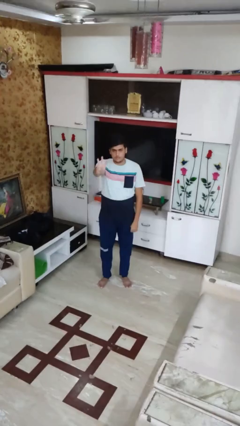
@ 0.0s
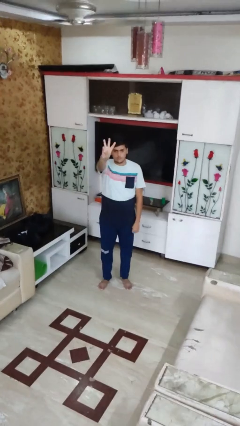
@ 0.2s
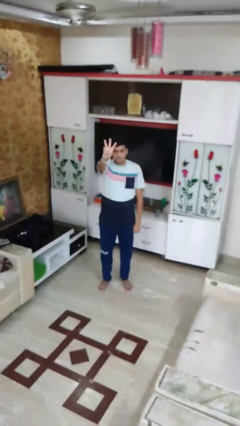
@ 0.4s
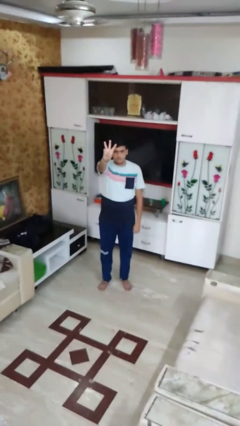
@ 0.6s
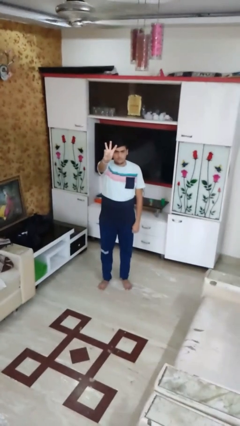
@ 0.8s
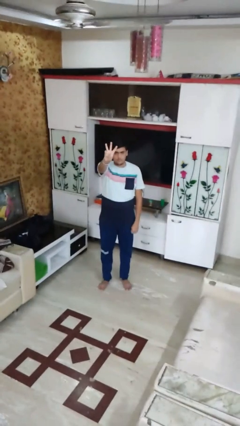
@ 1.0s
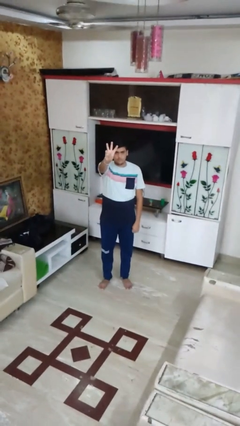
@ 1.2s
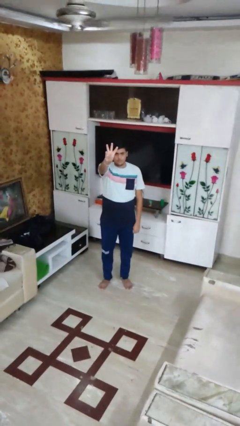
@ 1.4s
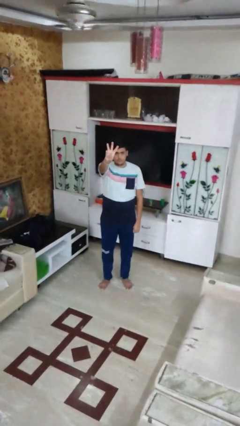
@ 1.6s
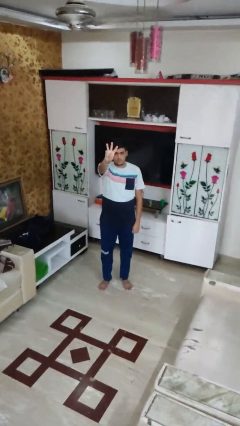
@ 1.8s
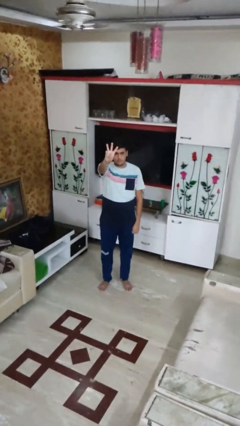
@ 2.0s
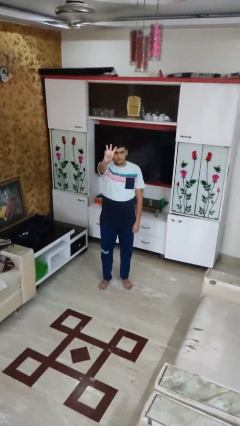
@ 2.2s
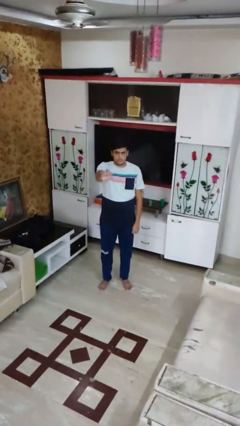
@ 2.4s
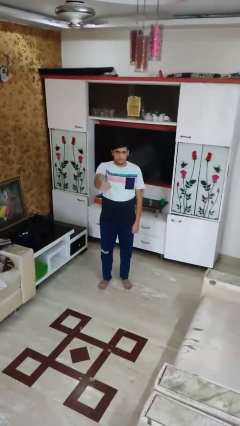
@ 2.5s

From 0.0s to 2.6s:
person gestures number three

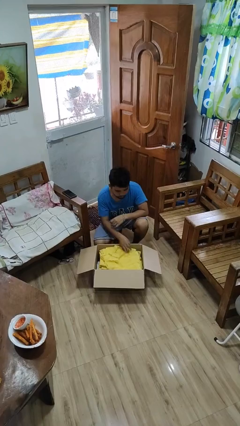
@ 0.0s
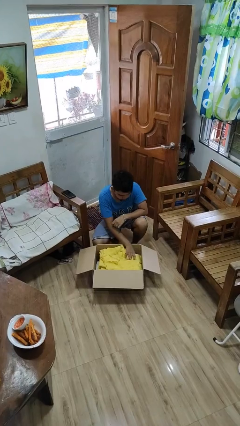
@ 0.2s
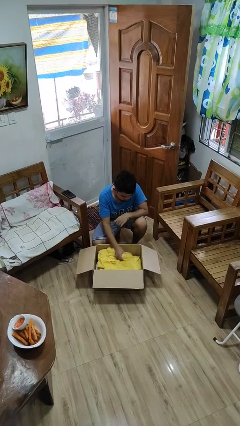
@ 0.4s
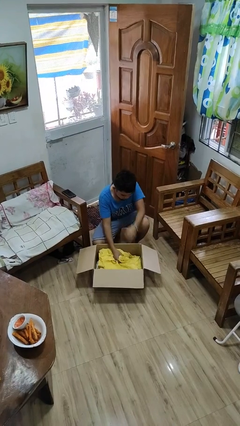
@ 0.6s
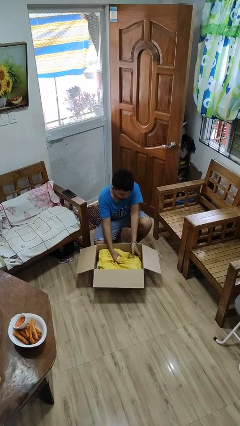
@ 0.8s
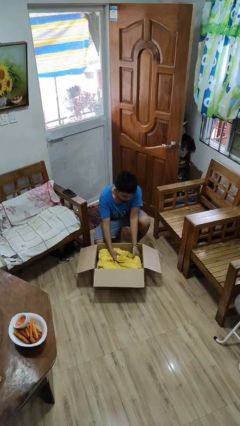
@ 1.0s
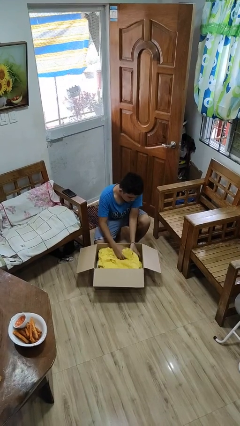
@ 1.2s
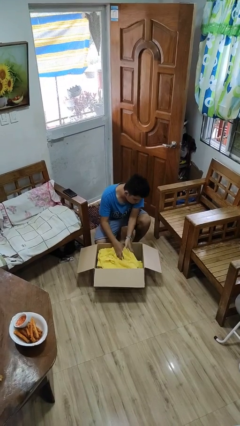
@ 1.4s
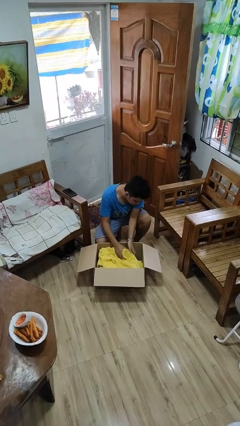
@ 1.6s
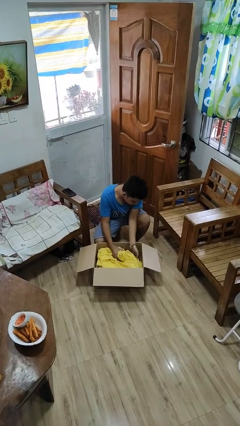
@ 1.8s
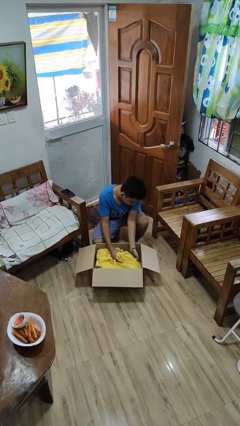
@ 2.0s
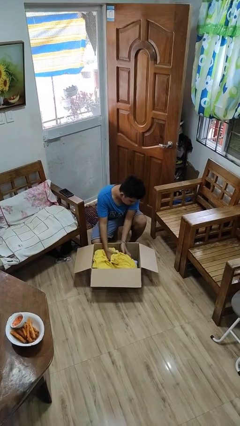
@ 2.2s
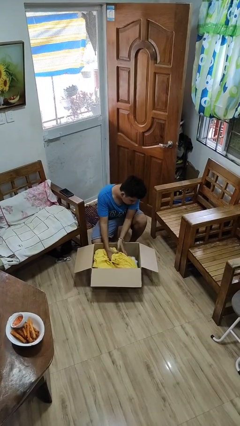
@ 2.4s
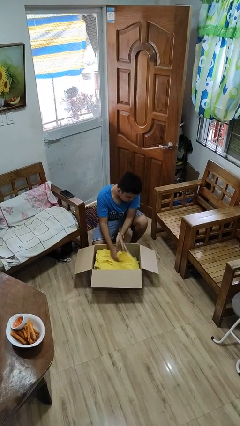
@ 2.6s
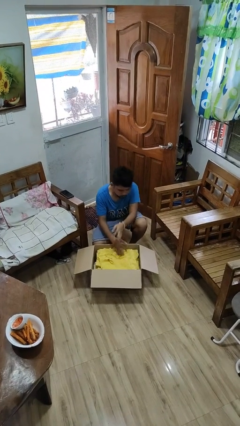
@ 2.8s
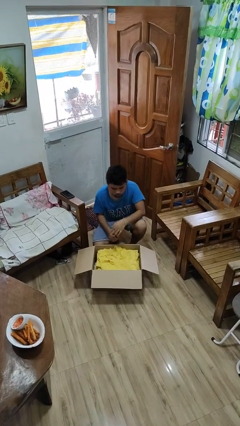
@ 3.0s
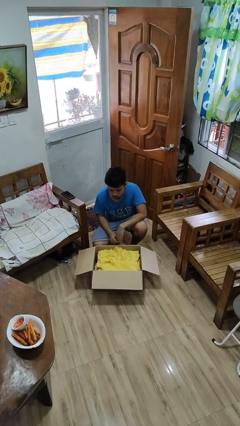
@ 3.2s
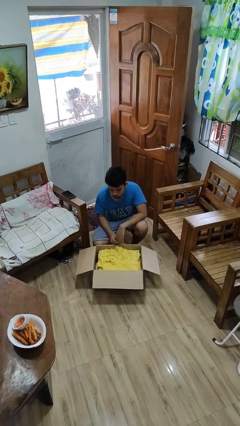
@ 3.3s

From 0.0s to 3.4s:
person searches in box

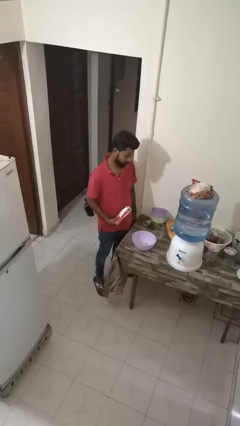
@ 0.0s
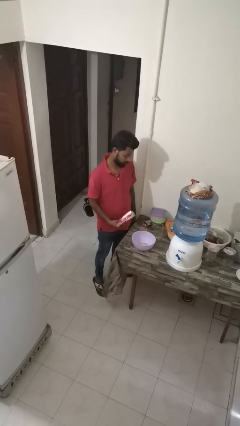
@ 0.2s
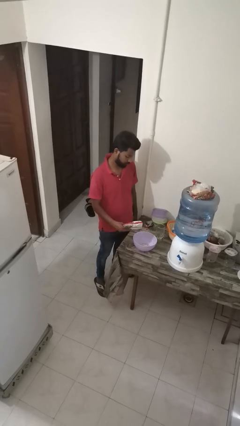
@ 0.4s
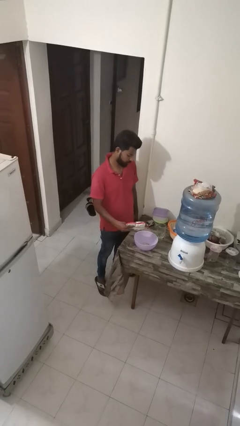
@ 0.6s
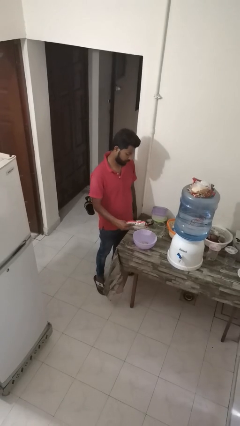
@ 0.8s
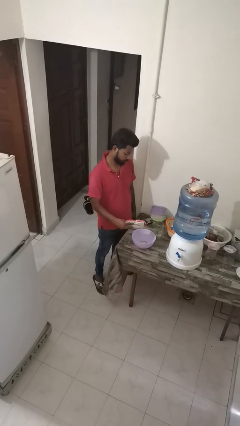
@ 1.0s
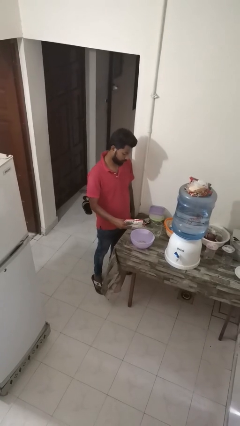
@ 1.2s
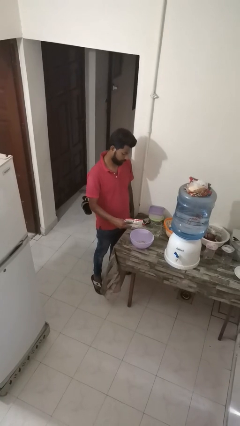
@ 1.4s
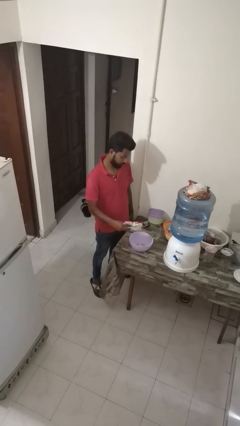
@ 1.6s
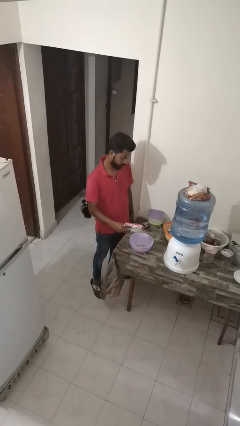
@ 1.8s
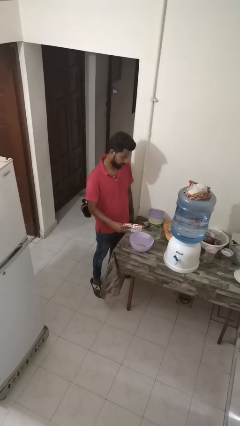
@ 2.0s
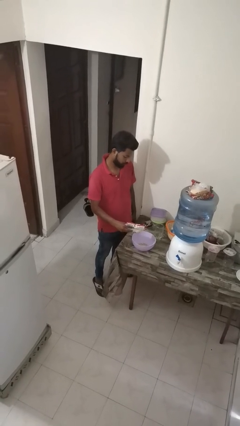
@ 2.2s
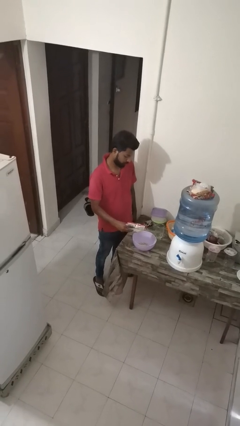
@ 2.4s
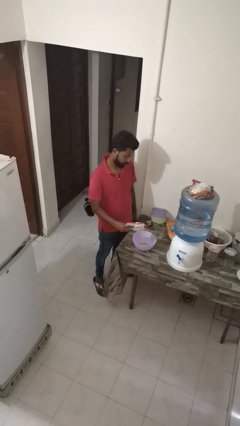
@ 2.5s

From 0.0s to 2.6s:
person pours into bowl

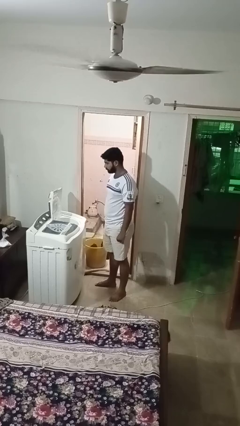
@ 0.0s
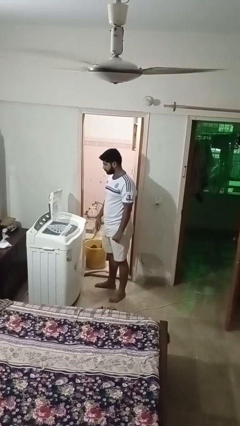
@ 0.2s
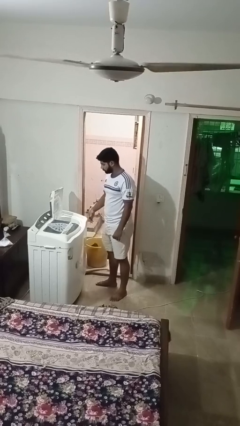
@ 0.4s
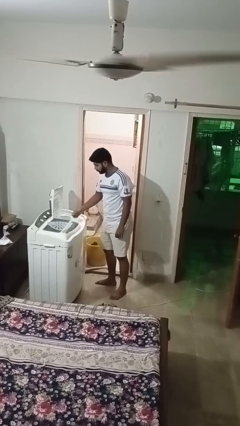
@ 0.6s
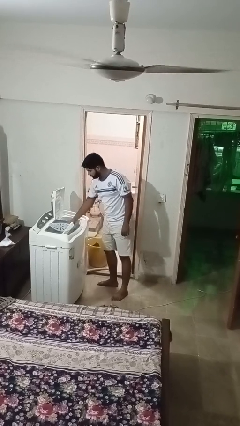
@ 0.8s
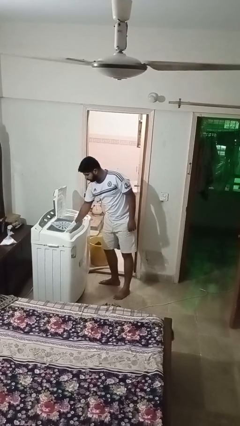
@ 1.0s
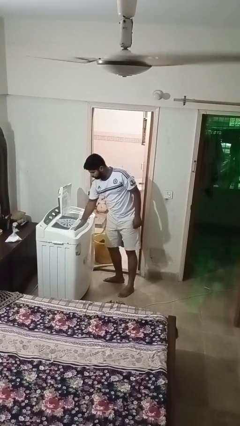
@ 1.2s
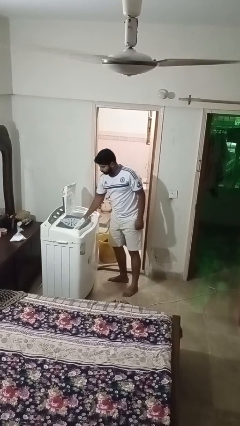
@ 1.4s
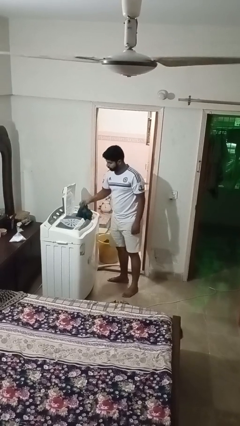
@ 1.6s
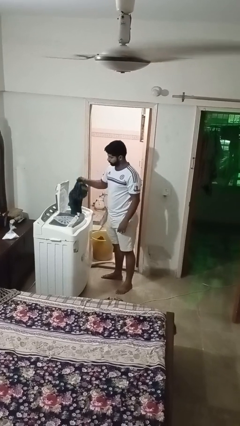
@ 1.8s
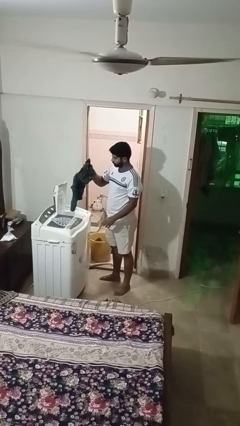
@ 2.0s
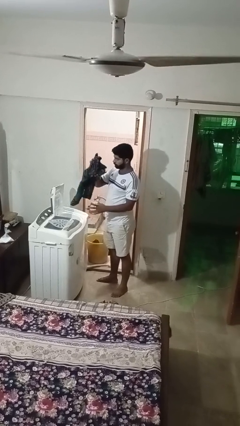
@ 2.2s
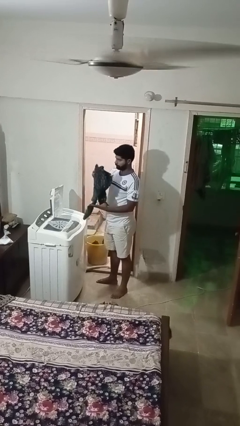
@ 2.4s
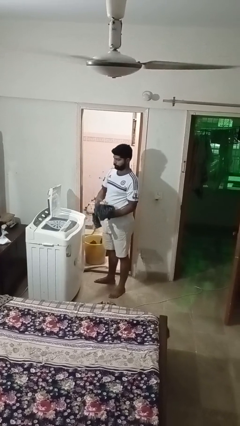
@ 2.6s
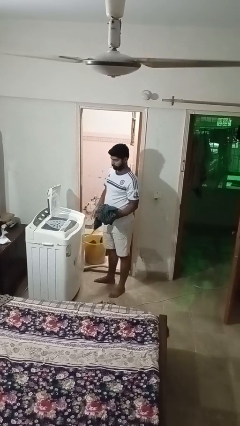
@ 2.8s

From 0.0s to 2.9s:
person unloads dryer

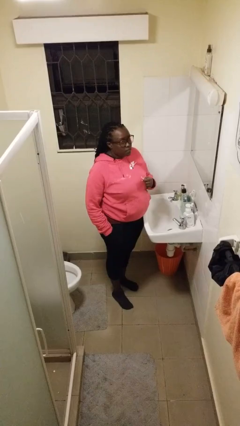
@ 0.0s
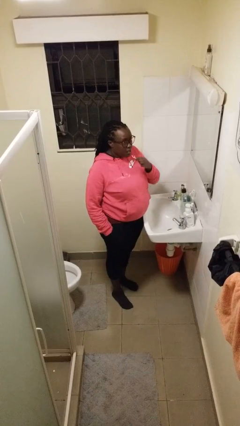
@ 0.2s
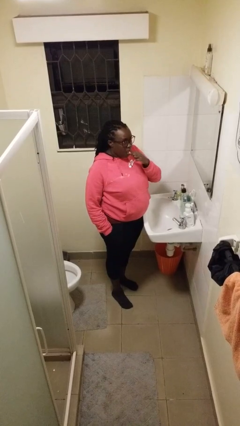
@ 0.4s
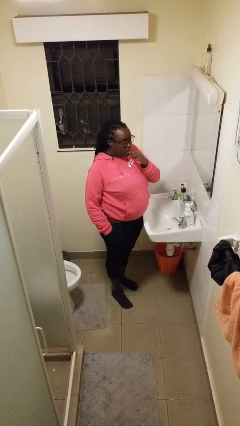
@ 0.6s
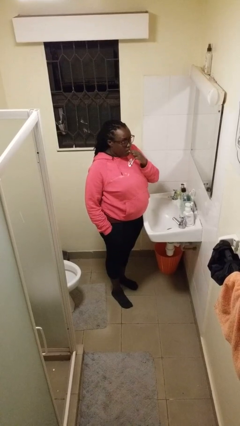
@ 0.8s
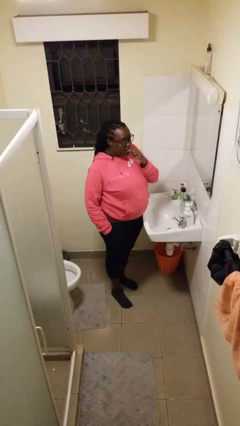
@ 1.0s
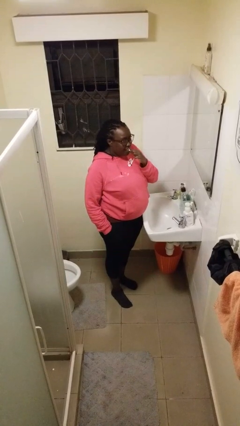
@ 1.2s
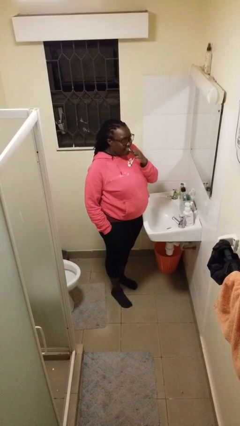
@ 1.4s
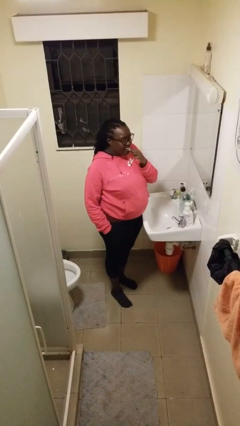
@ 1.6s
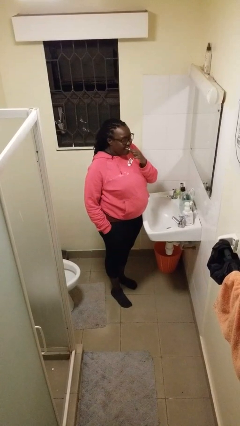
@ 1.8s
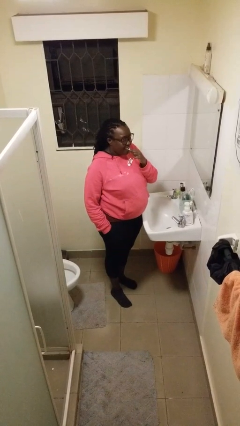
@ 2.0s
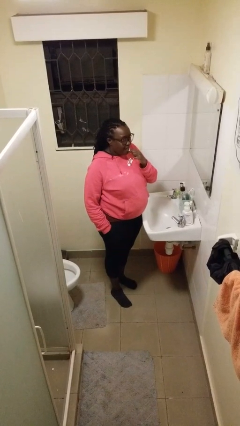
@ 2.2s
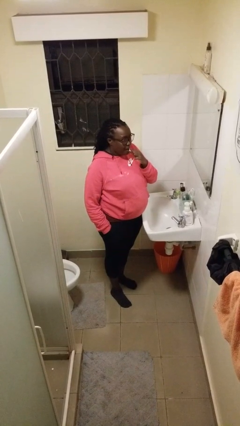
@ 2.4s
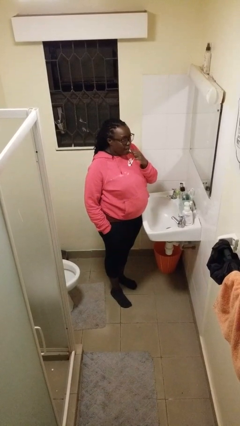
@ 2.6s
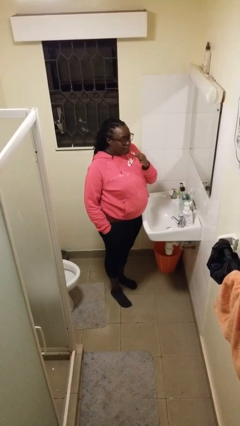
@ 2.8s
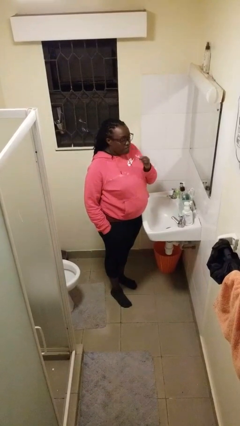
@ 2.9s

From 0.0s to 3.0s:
person flosses

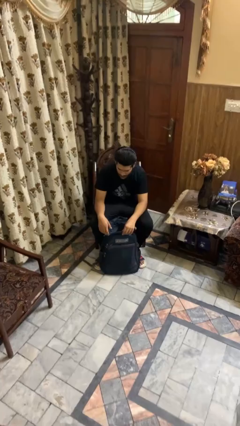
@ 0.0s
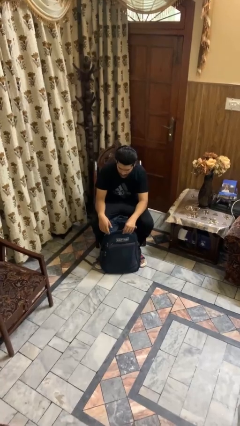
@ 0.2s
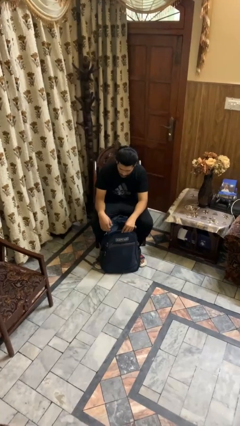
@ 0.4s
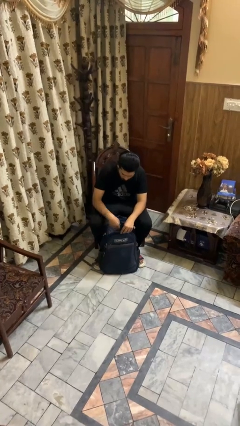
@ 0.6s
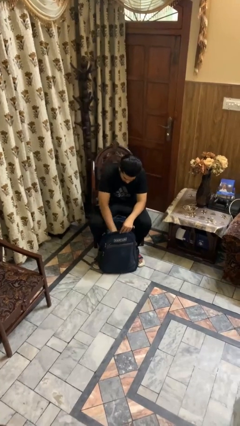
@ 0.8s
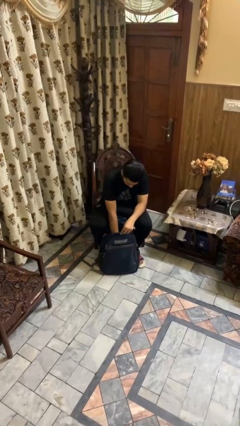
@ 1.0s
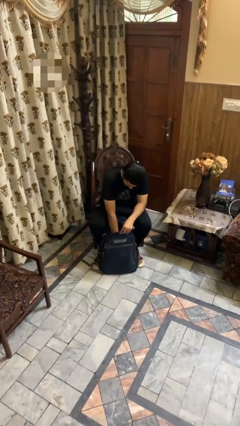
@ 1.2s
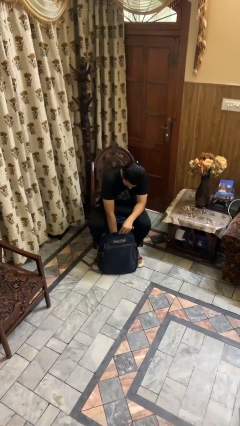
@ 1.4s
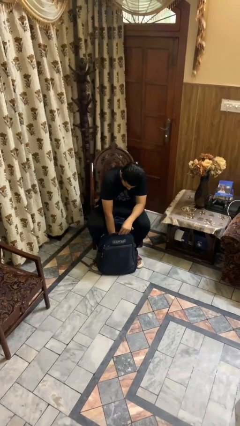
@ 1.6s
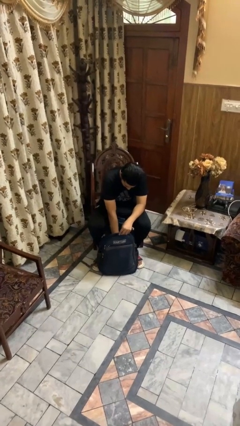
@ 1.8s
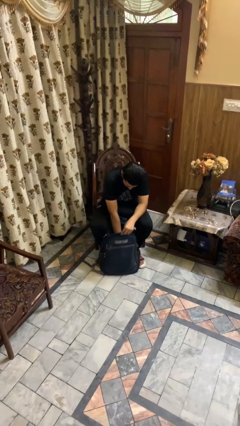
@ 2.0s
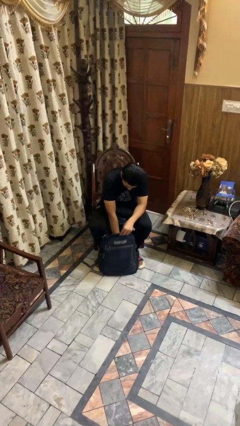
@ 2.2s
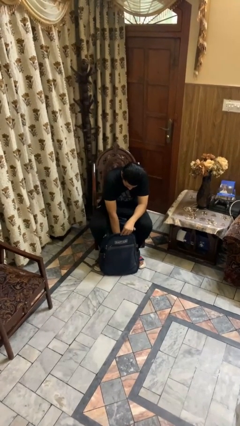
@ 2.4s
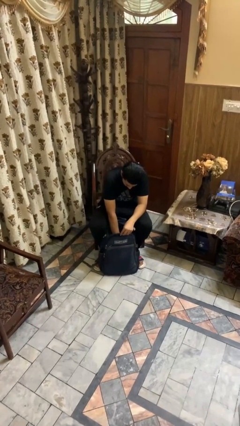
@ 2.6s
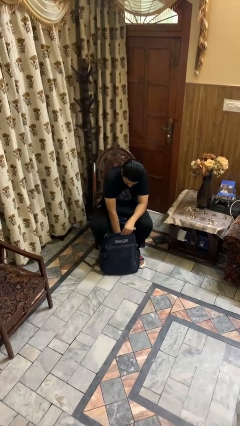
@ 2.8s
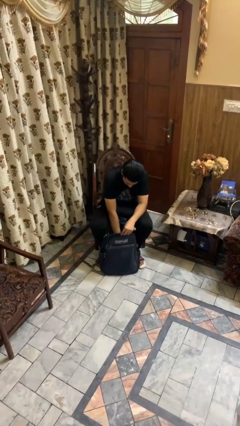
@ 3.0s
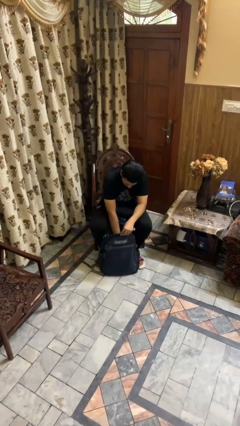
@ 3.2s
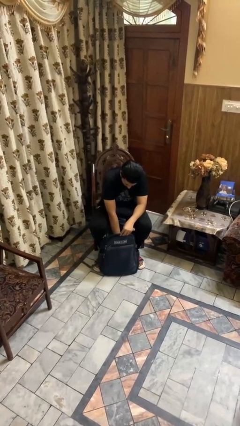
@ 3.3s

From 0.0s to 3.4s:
person searches in backpack
